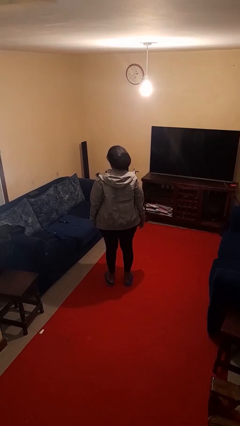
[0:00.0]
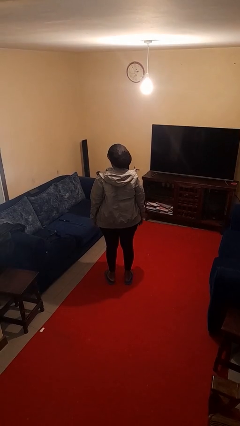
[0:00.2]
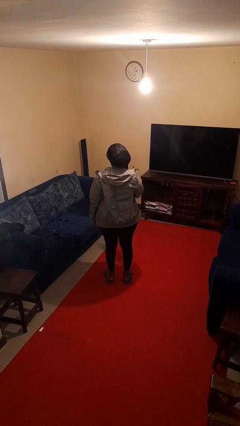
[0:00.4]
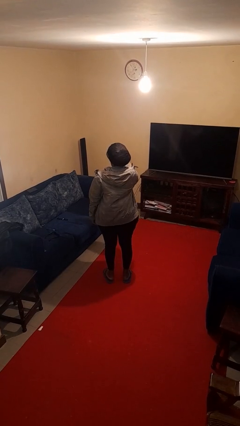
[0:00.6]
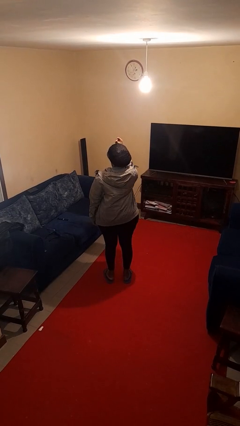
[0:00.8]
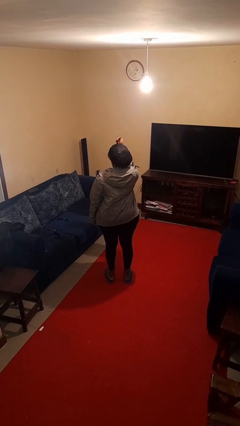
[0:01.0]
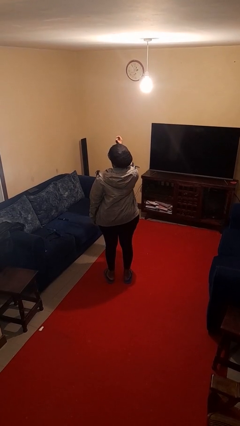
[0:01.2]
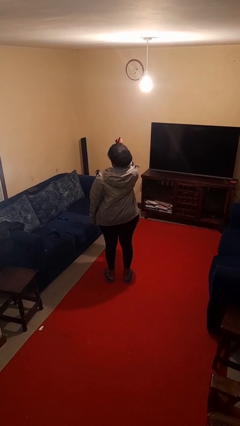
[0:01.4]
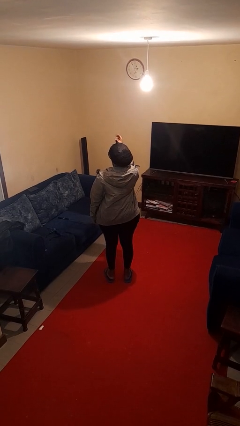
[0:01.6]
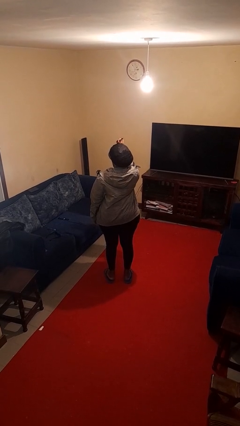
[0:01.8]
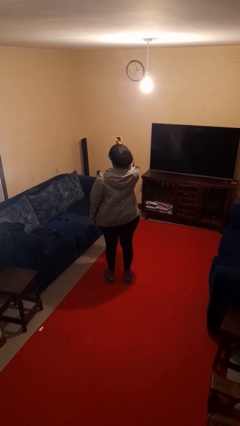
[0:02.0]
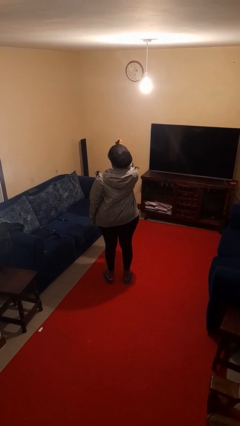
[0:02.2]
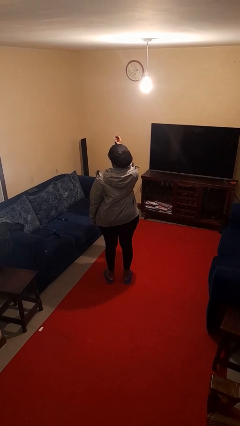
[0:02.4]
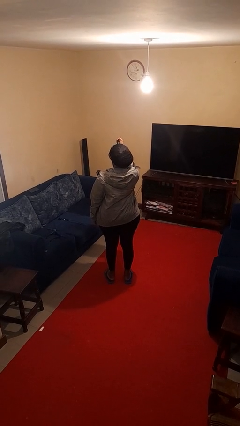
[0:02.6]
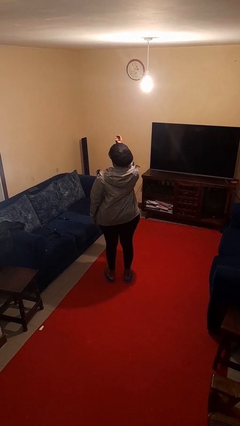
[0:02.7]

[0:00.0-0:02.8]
person snaps fingers

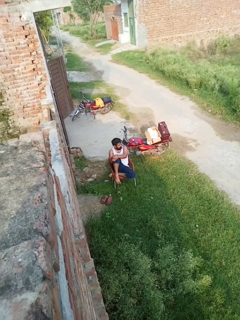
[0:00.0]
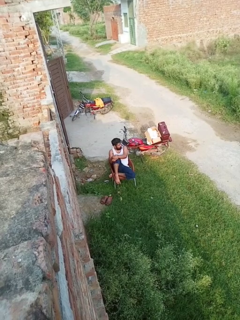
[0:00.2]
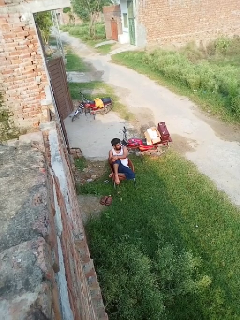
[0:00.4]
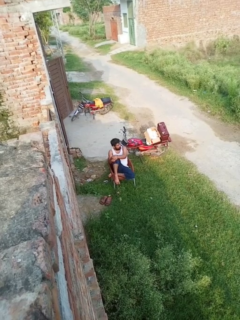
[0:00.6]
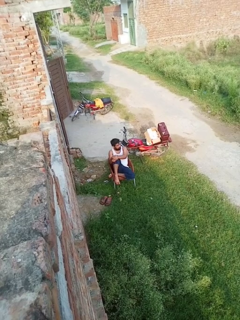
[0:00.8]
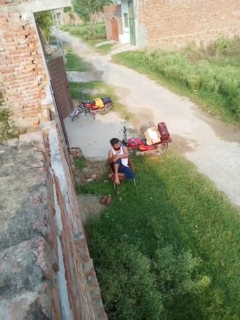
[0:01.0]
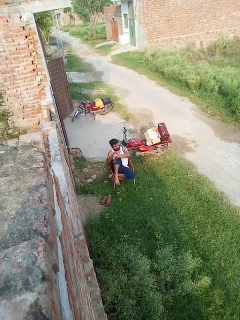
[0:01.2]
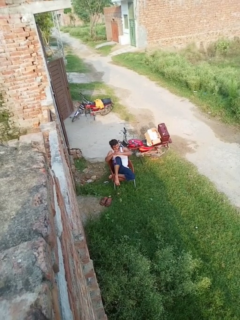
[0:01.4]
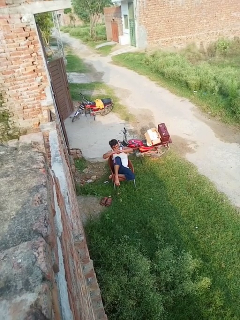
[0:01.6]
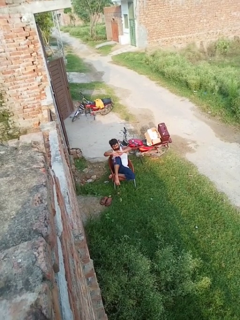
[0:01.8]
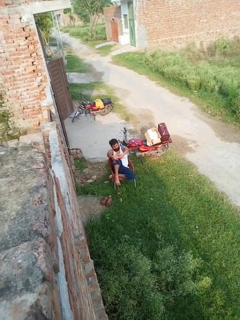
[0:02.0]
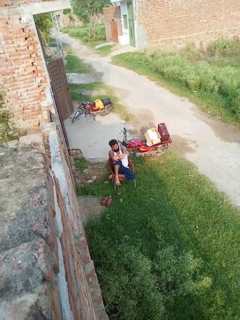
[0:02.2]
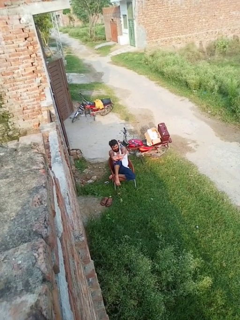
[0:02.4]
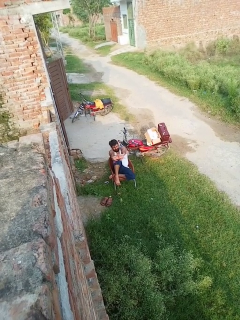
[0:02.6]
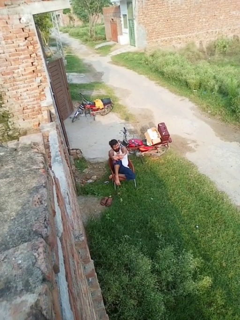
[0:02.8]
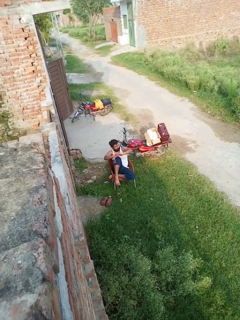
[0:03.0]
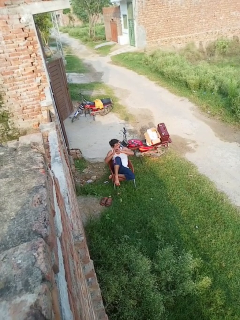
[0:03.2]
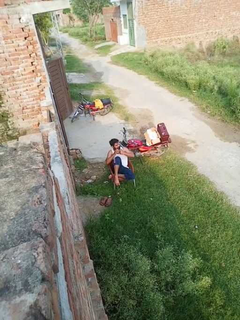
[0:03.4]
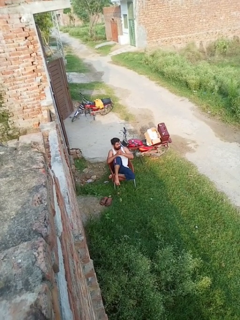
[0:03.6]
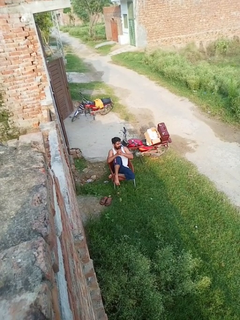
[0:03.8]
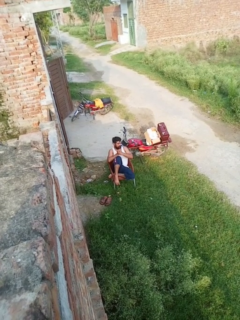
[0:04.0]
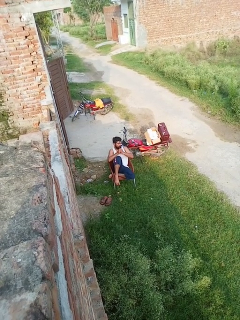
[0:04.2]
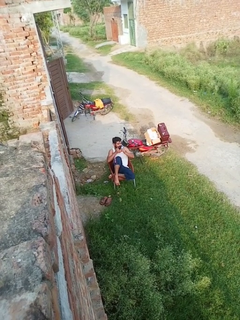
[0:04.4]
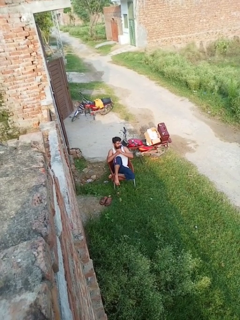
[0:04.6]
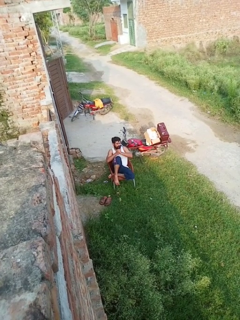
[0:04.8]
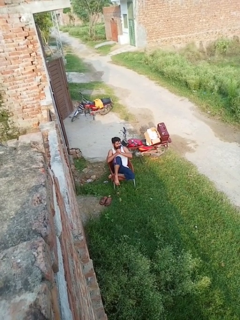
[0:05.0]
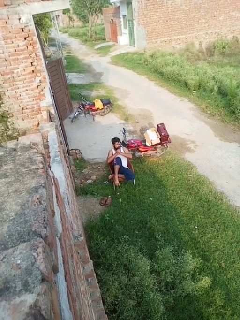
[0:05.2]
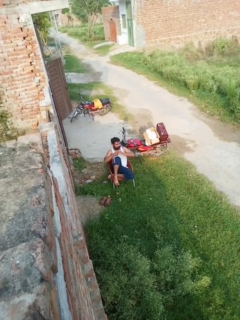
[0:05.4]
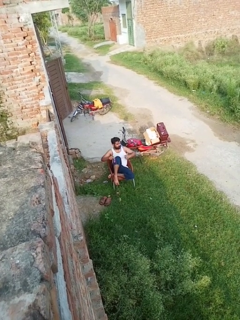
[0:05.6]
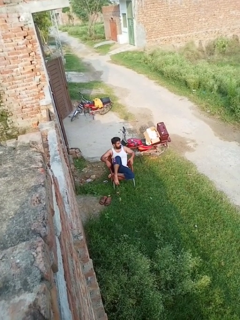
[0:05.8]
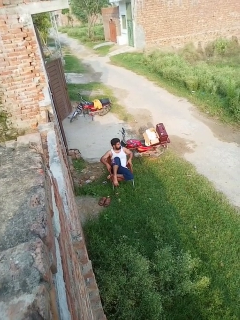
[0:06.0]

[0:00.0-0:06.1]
person cracks knuckles

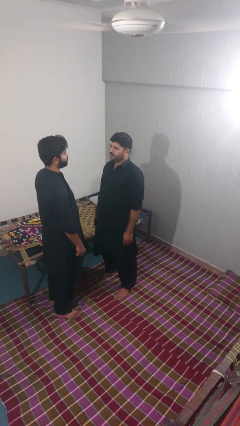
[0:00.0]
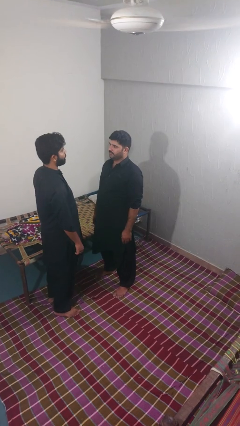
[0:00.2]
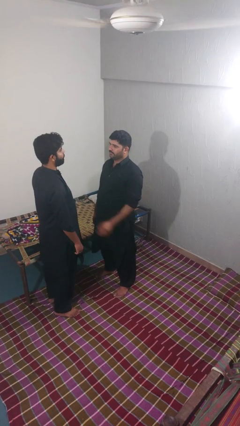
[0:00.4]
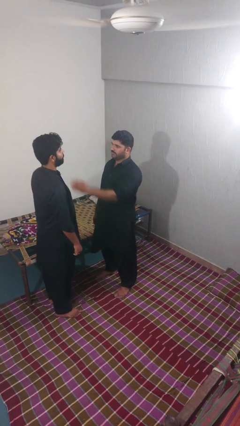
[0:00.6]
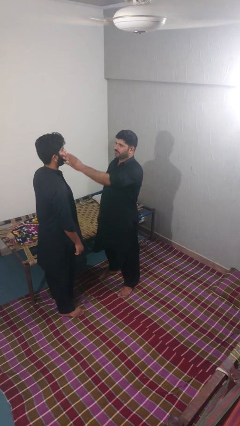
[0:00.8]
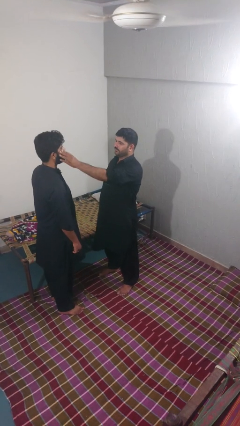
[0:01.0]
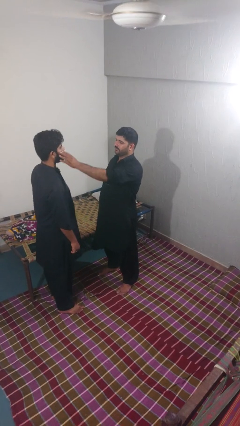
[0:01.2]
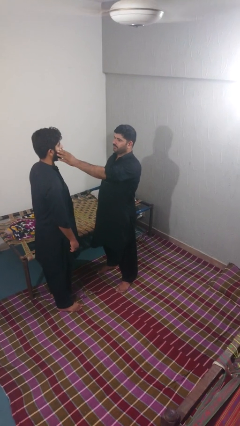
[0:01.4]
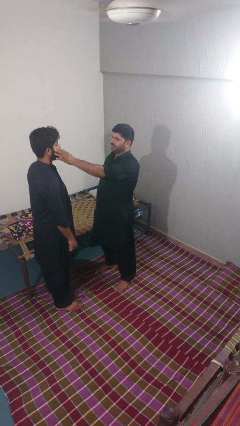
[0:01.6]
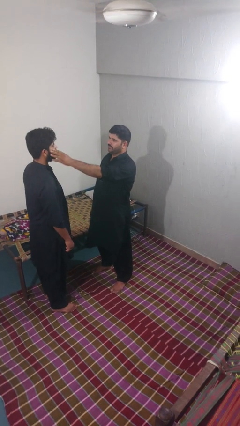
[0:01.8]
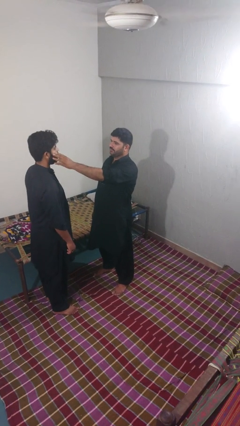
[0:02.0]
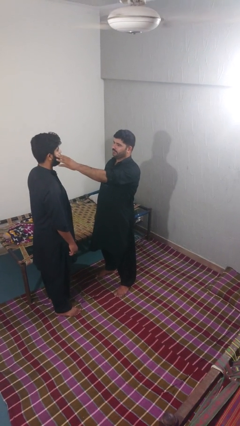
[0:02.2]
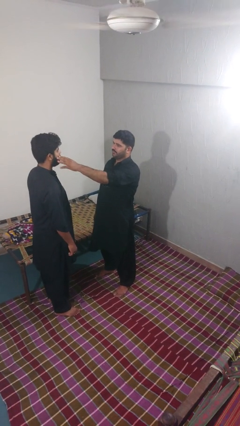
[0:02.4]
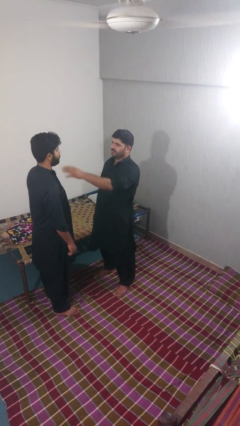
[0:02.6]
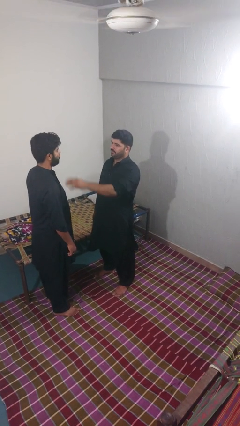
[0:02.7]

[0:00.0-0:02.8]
person touches face of person

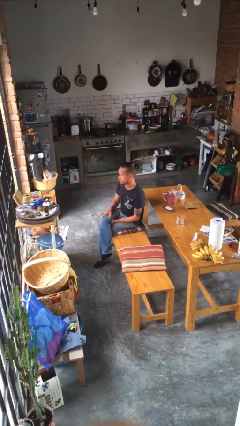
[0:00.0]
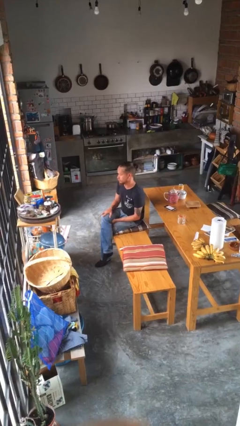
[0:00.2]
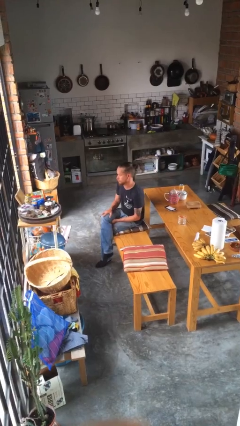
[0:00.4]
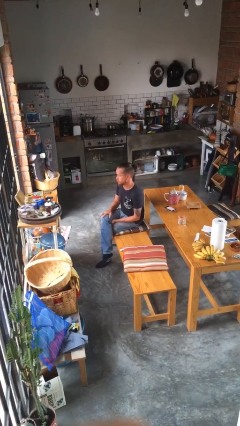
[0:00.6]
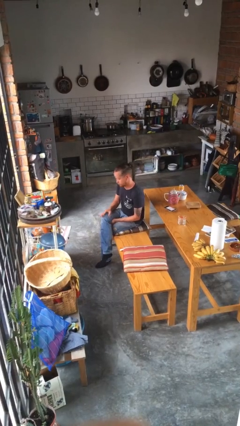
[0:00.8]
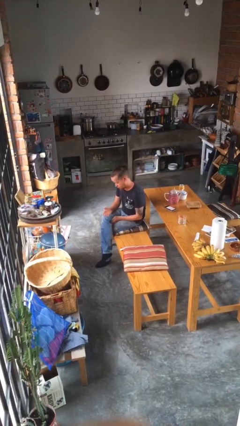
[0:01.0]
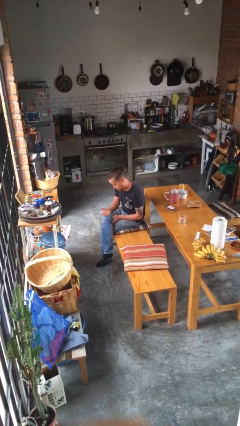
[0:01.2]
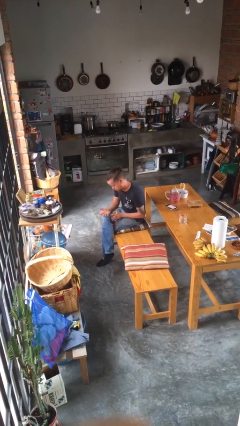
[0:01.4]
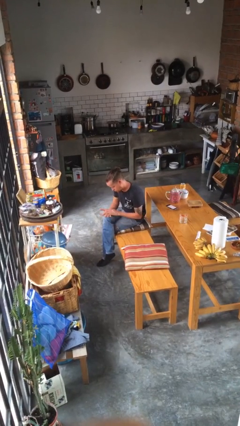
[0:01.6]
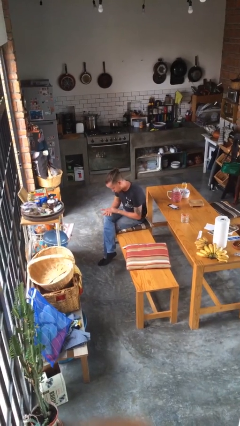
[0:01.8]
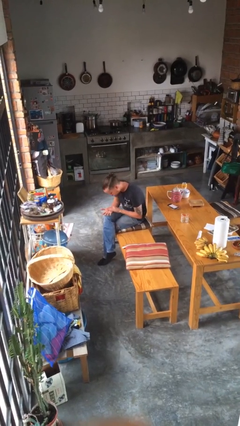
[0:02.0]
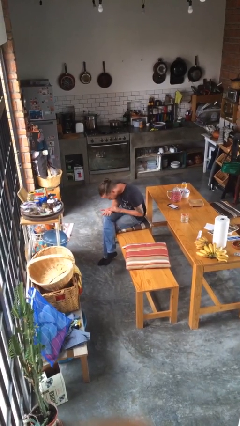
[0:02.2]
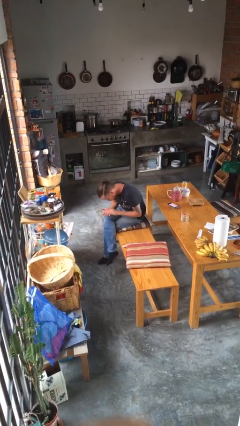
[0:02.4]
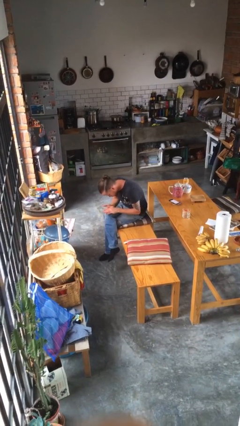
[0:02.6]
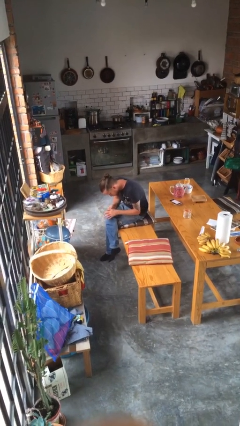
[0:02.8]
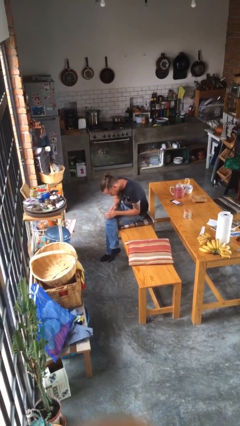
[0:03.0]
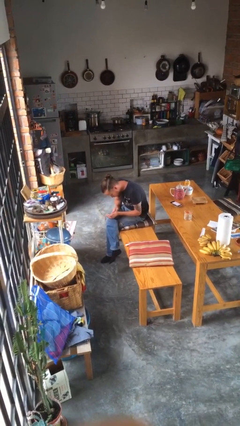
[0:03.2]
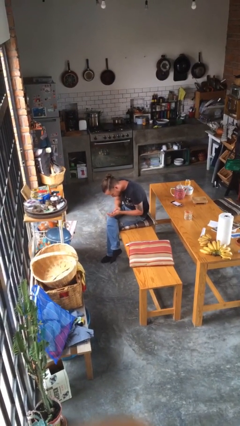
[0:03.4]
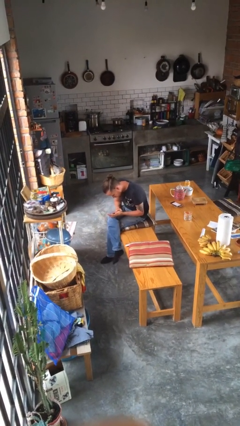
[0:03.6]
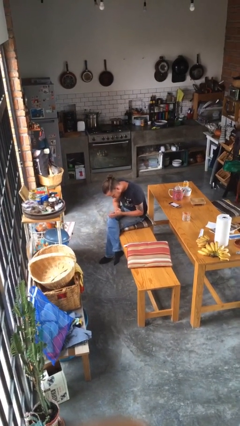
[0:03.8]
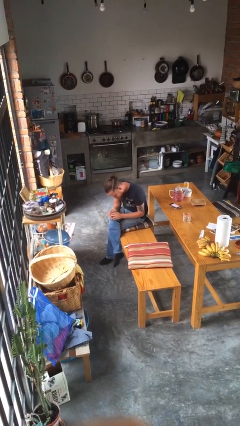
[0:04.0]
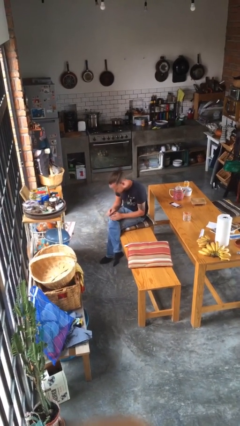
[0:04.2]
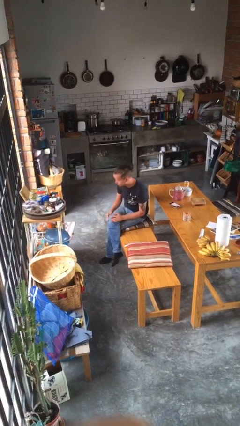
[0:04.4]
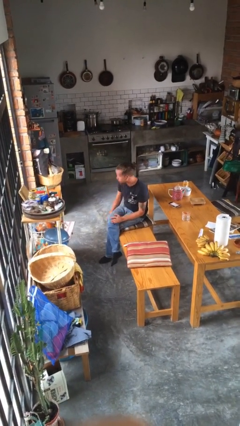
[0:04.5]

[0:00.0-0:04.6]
person looks at hands in lap

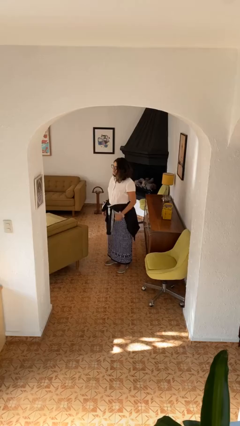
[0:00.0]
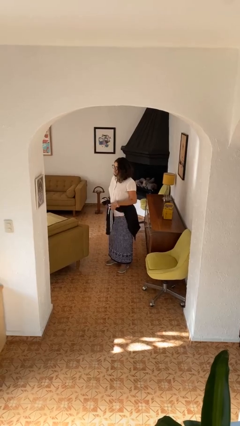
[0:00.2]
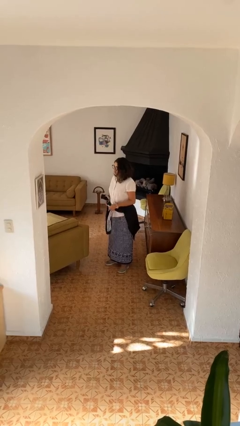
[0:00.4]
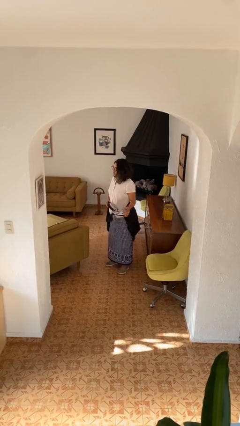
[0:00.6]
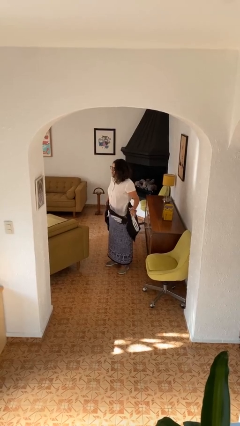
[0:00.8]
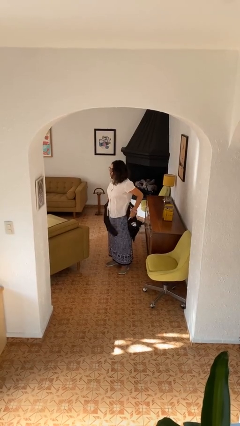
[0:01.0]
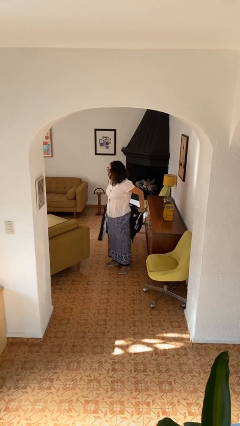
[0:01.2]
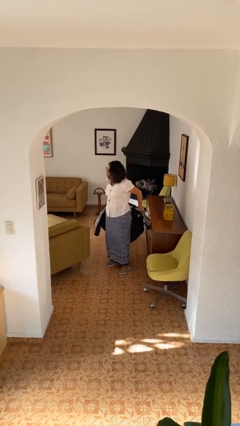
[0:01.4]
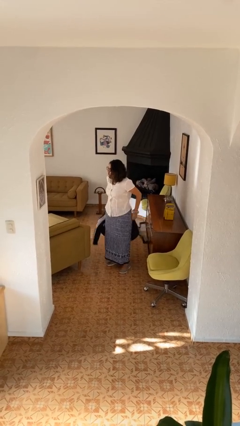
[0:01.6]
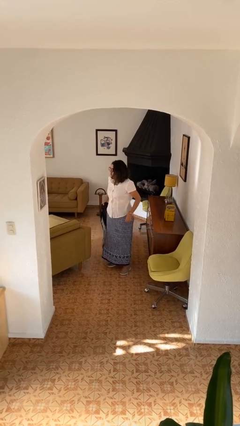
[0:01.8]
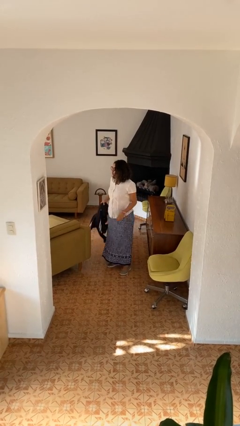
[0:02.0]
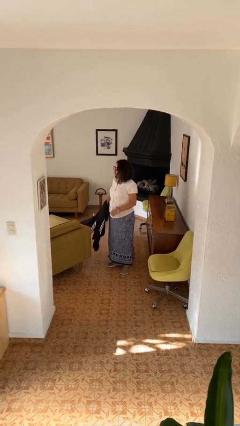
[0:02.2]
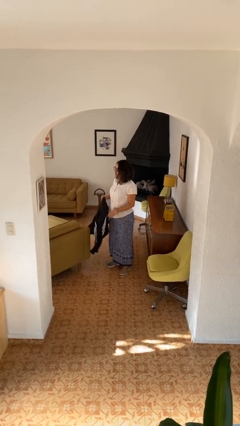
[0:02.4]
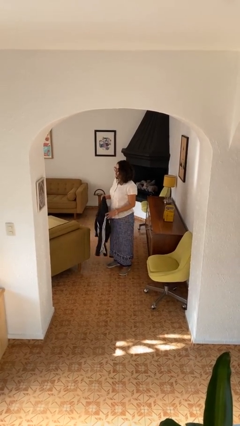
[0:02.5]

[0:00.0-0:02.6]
person unties jacket around waist

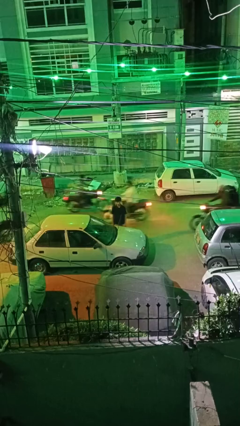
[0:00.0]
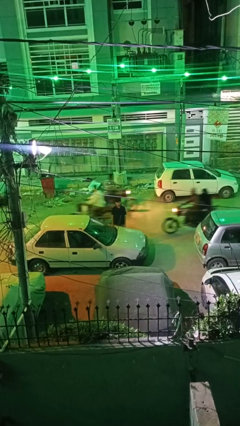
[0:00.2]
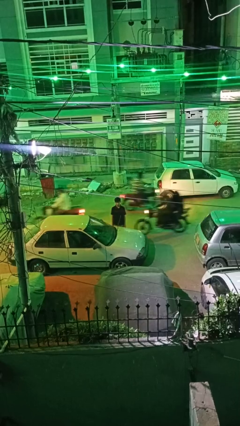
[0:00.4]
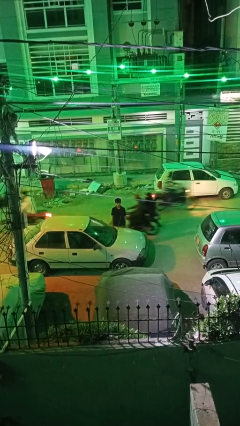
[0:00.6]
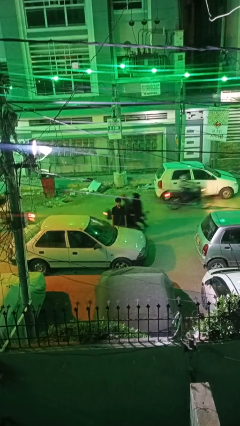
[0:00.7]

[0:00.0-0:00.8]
person flips up car wipers
